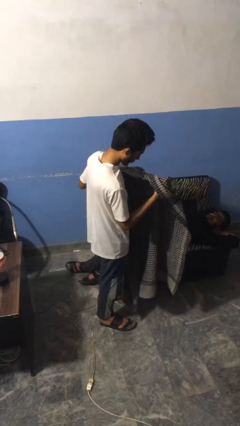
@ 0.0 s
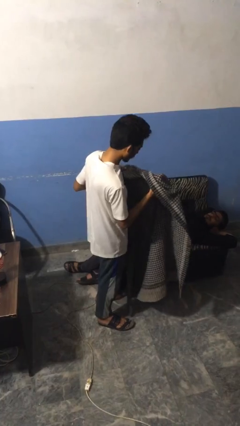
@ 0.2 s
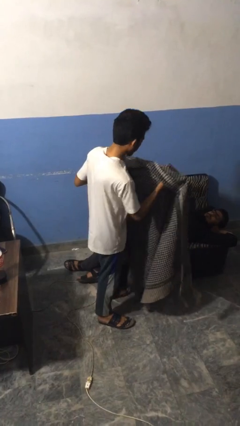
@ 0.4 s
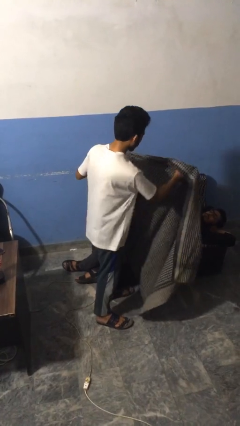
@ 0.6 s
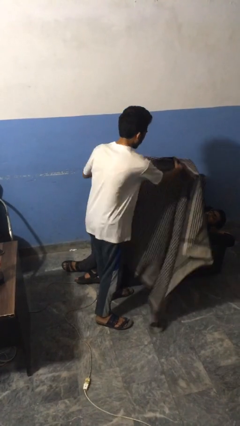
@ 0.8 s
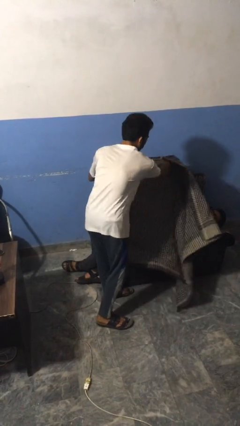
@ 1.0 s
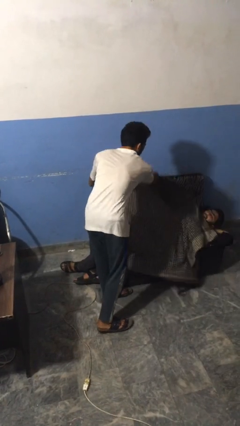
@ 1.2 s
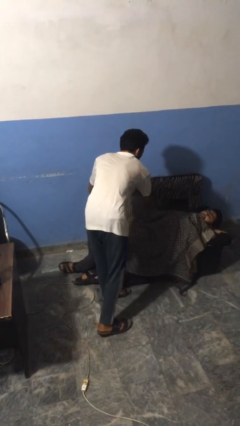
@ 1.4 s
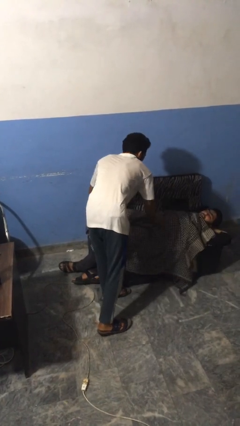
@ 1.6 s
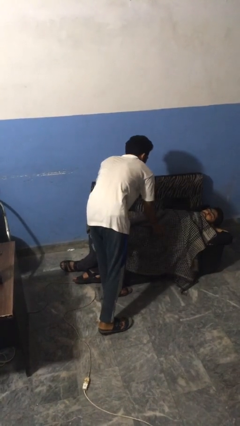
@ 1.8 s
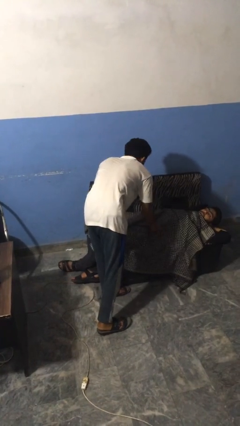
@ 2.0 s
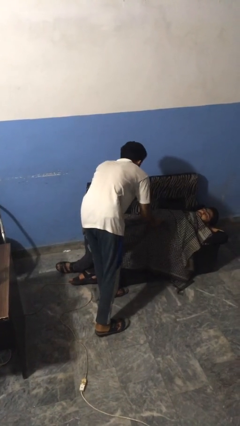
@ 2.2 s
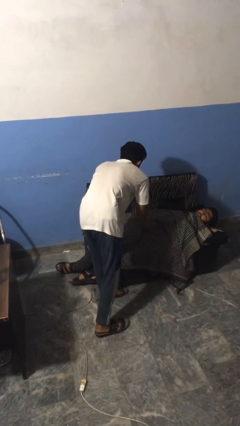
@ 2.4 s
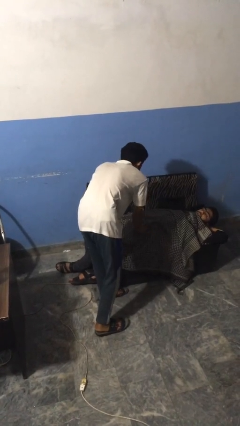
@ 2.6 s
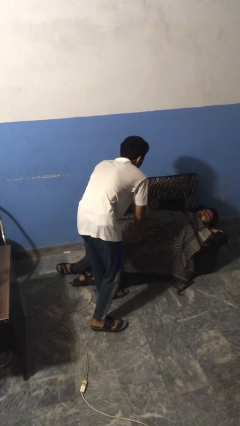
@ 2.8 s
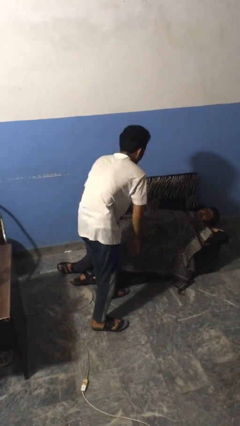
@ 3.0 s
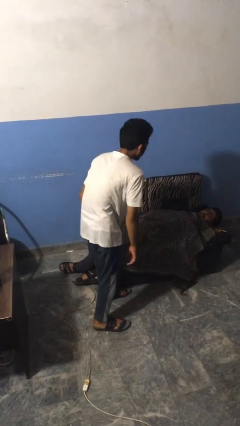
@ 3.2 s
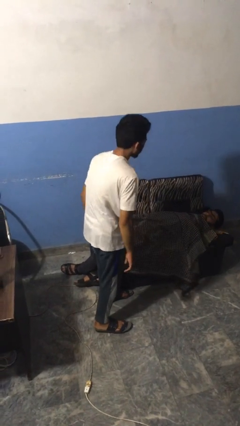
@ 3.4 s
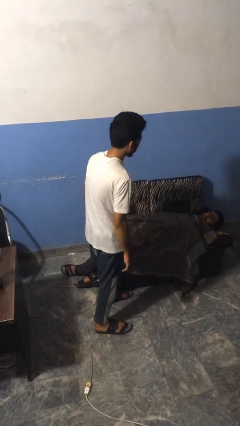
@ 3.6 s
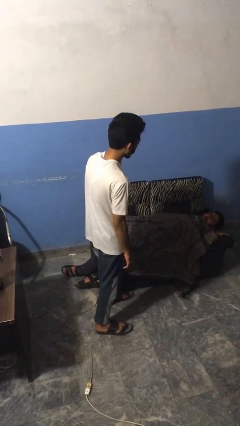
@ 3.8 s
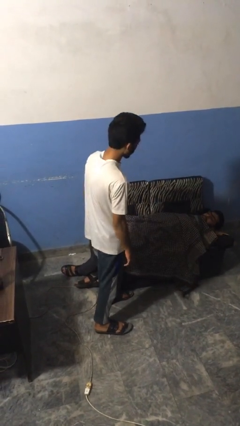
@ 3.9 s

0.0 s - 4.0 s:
person covers friend with blanket

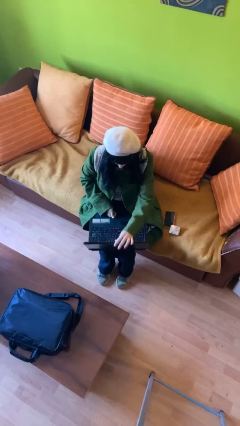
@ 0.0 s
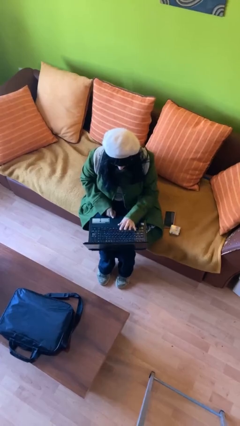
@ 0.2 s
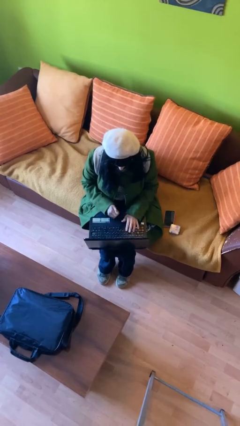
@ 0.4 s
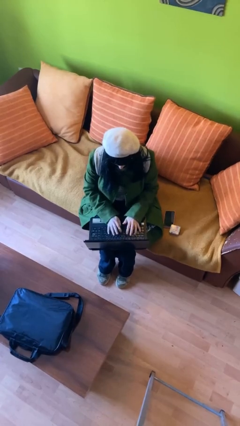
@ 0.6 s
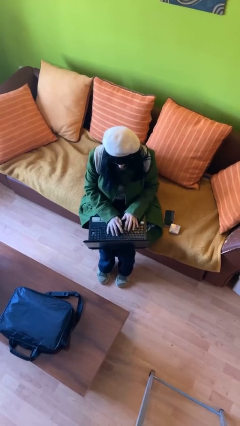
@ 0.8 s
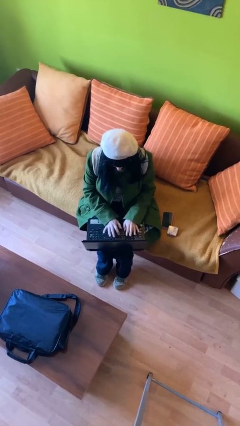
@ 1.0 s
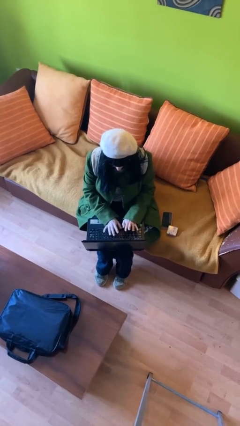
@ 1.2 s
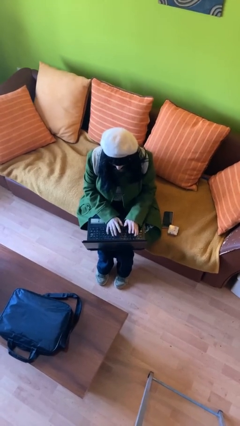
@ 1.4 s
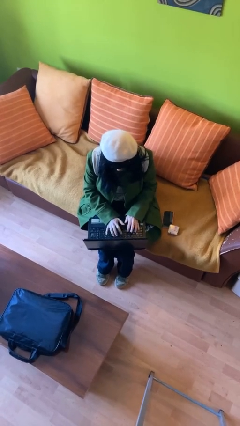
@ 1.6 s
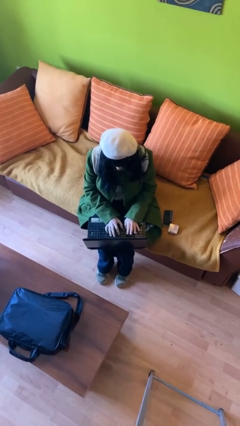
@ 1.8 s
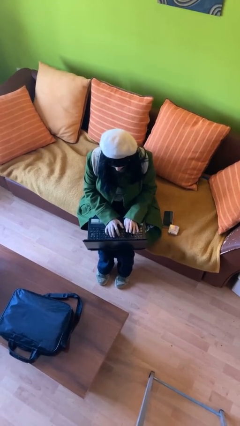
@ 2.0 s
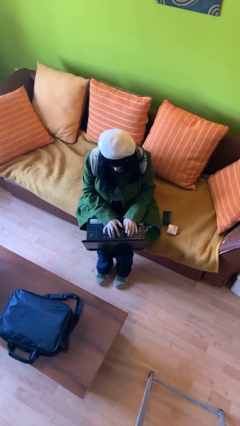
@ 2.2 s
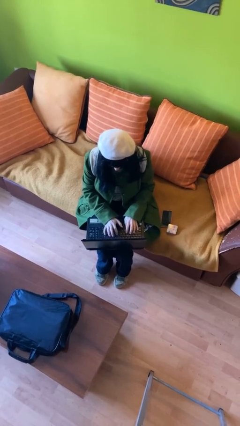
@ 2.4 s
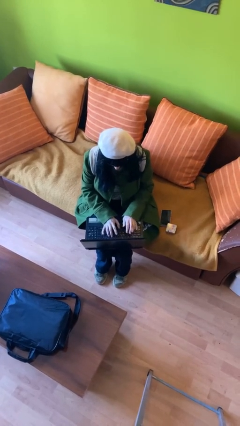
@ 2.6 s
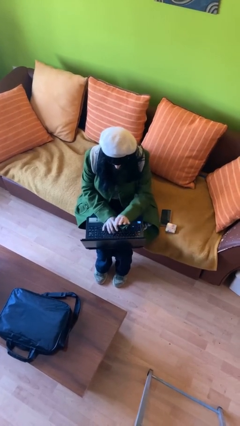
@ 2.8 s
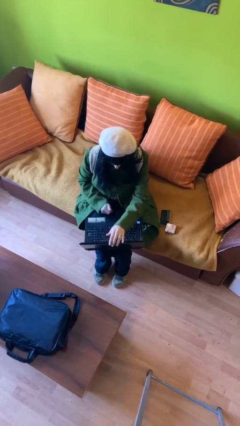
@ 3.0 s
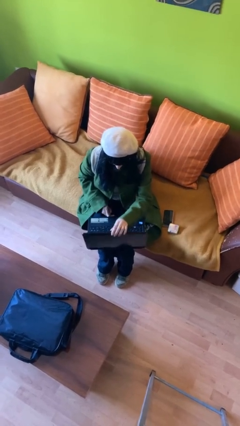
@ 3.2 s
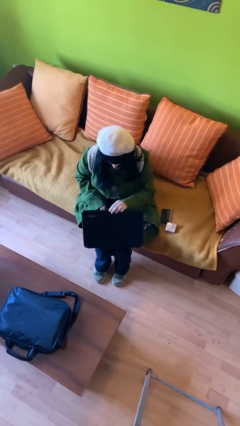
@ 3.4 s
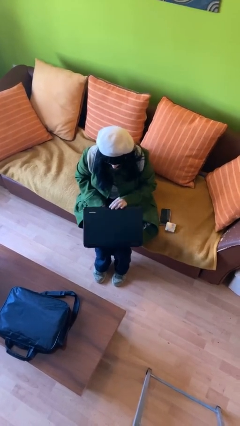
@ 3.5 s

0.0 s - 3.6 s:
person interacts with laptop

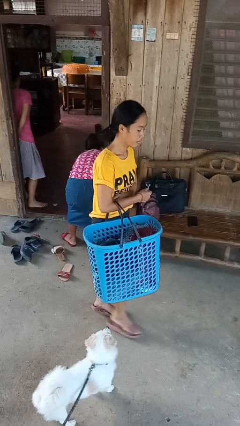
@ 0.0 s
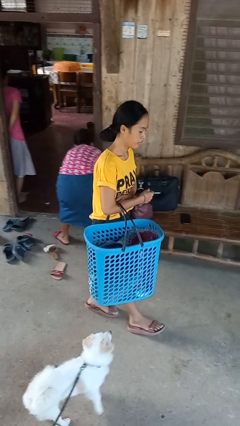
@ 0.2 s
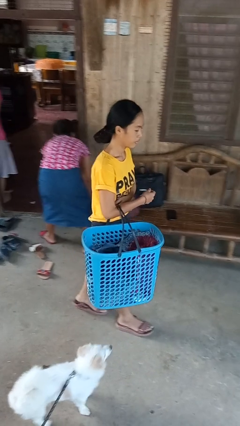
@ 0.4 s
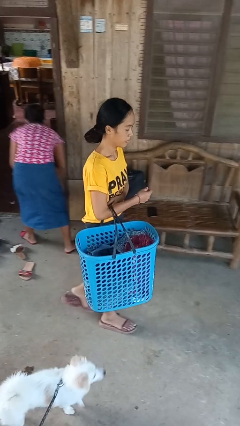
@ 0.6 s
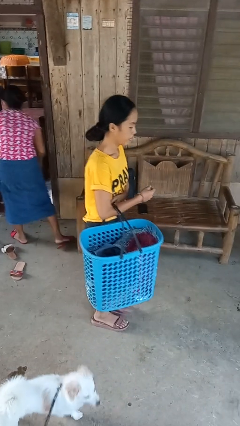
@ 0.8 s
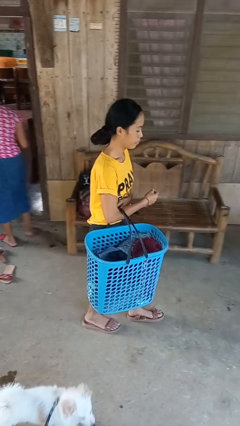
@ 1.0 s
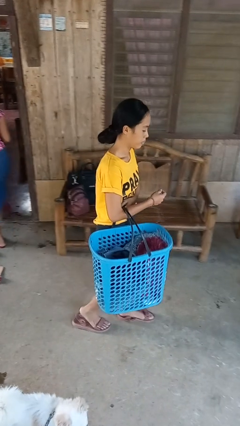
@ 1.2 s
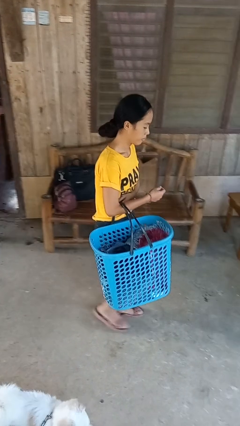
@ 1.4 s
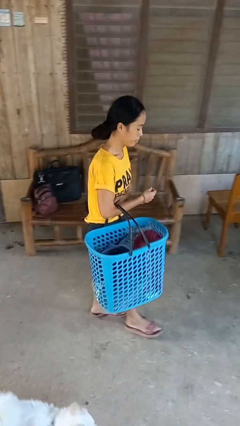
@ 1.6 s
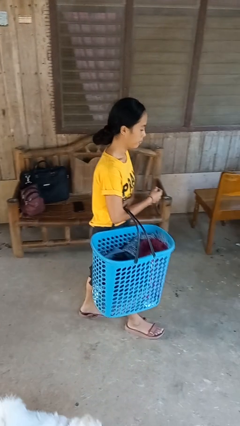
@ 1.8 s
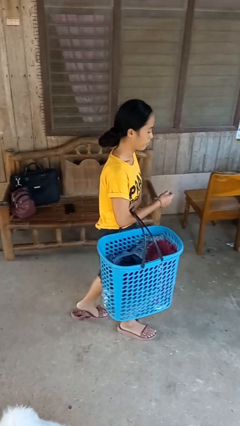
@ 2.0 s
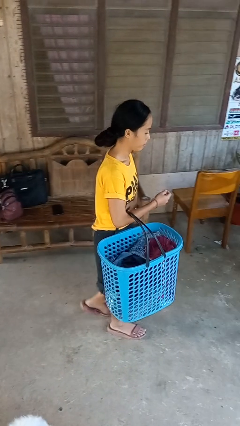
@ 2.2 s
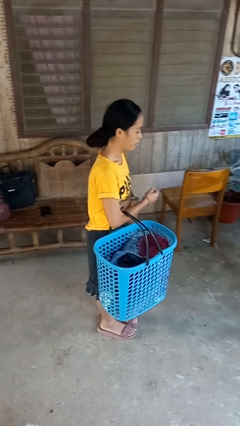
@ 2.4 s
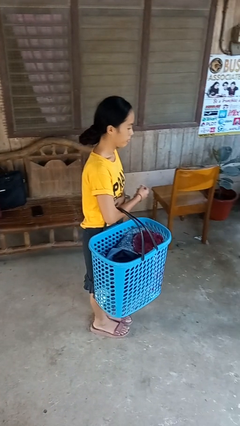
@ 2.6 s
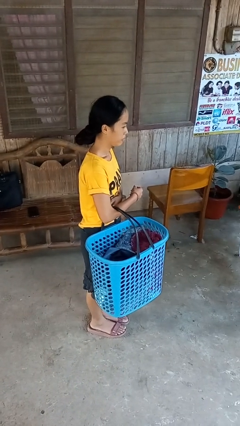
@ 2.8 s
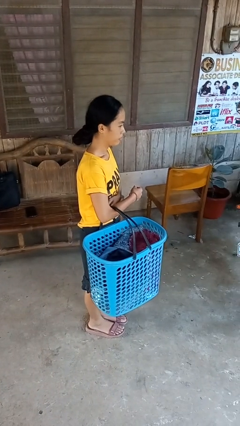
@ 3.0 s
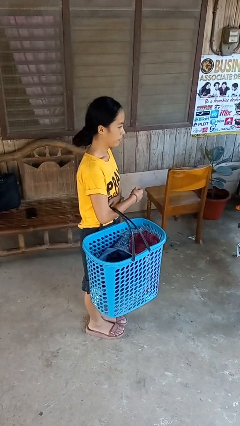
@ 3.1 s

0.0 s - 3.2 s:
person carries laundry basket

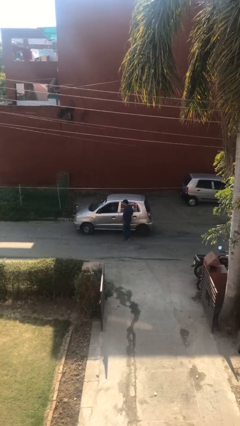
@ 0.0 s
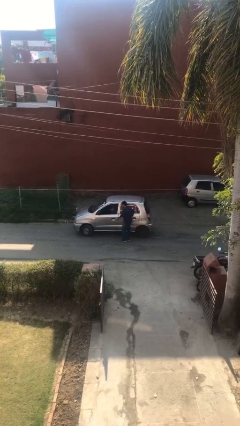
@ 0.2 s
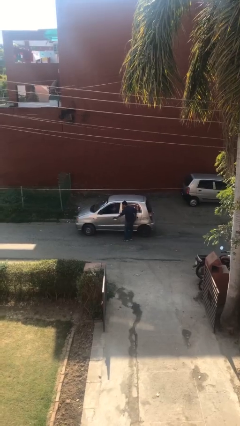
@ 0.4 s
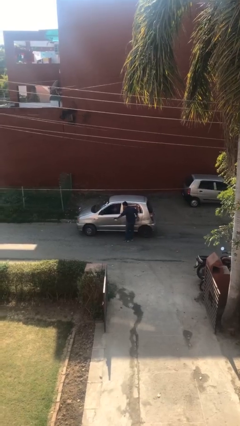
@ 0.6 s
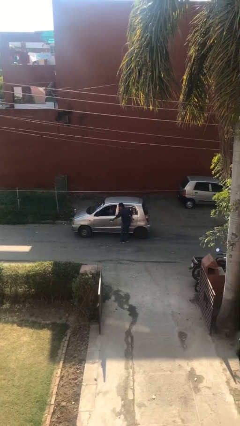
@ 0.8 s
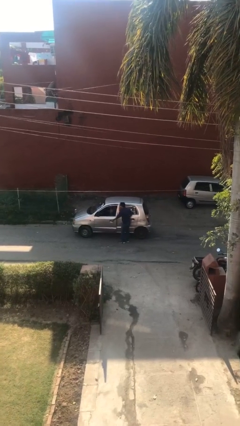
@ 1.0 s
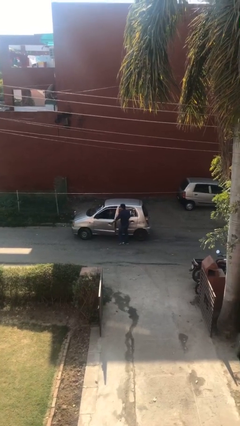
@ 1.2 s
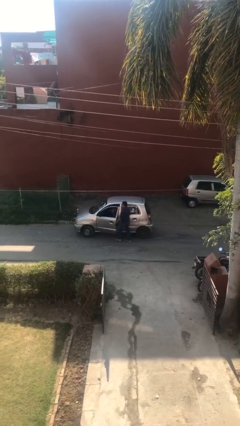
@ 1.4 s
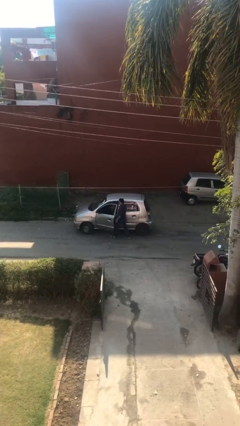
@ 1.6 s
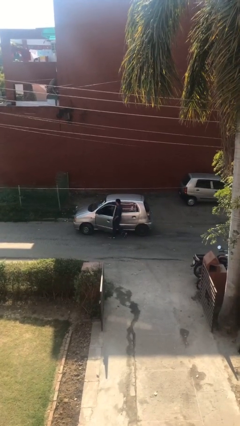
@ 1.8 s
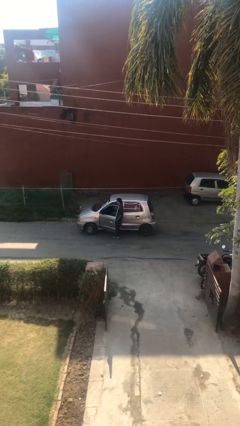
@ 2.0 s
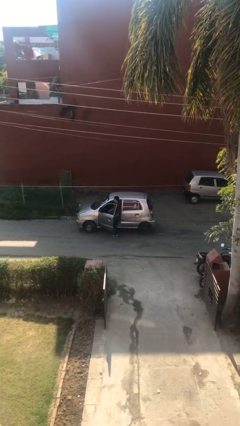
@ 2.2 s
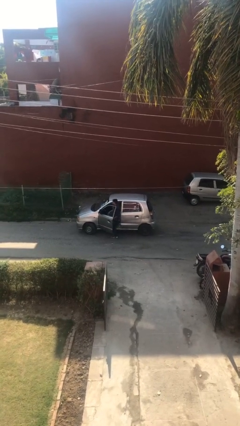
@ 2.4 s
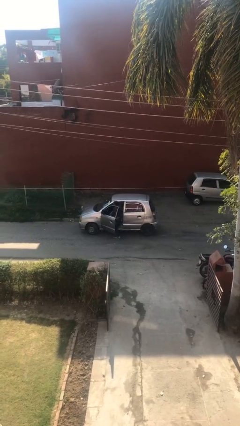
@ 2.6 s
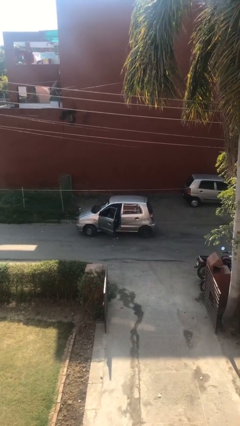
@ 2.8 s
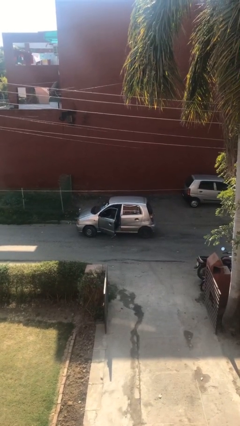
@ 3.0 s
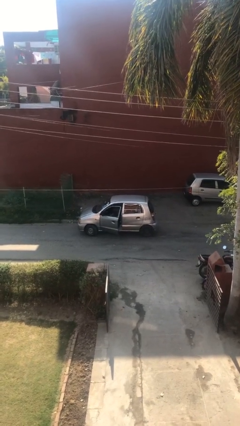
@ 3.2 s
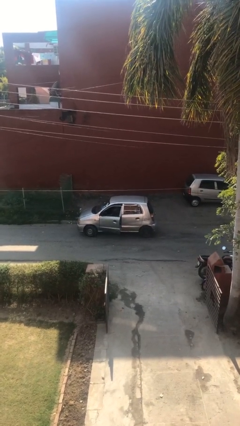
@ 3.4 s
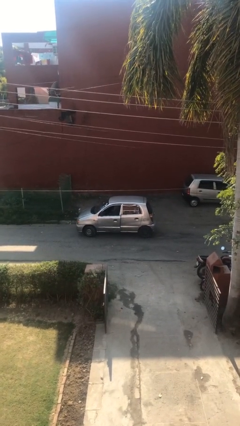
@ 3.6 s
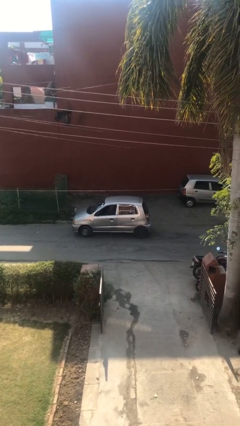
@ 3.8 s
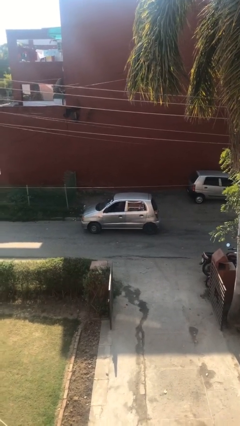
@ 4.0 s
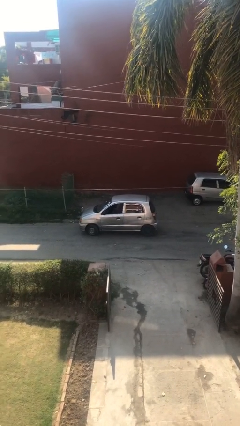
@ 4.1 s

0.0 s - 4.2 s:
car picks up person

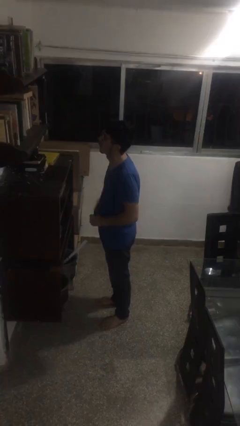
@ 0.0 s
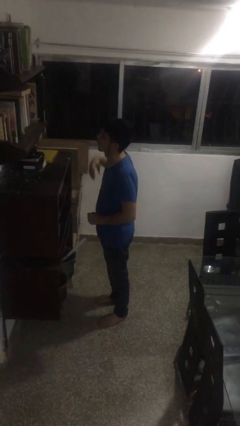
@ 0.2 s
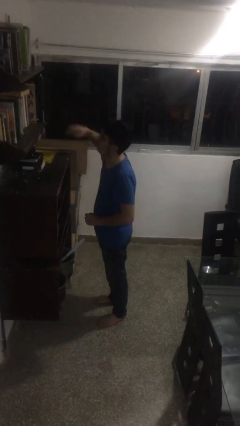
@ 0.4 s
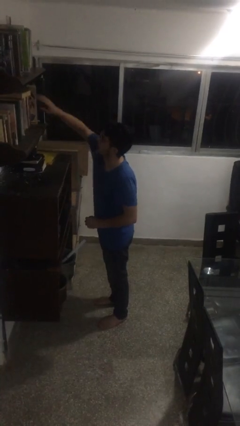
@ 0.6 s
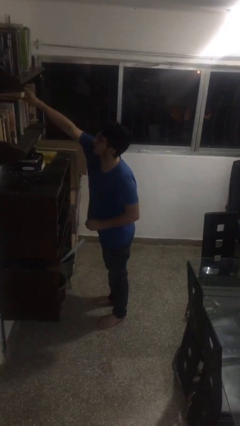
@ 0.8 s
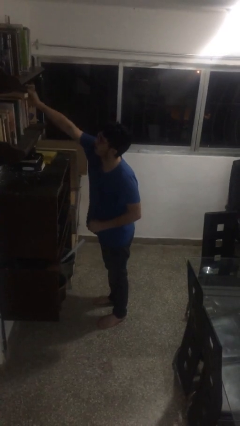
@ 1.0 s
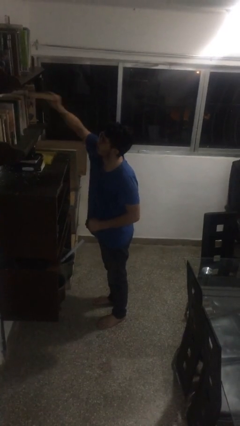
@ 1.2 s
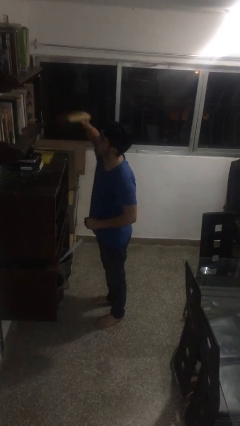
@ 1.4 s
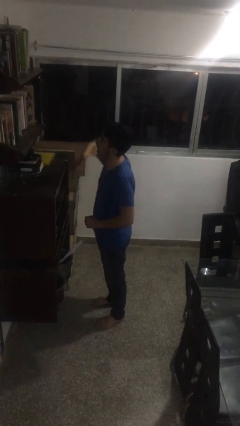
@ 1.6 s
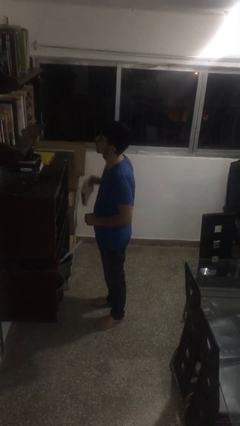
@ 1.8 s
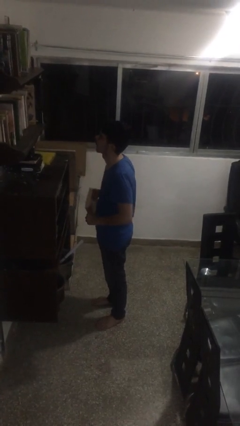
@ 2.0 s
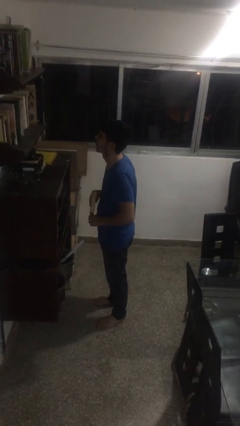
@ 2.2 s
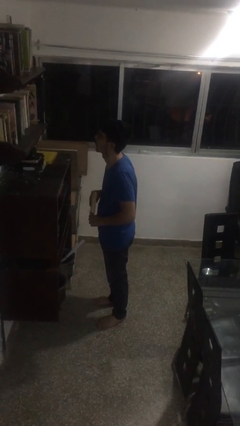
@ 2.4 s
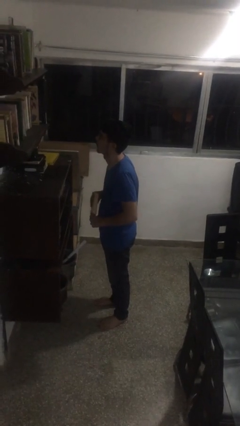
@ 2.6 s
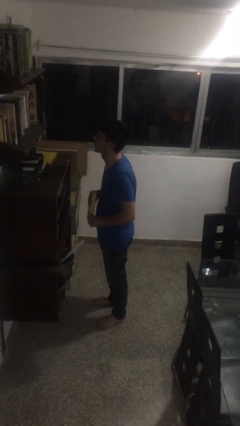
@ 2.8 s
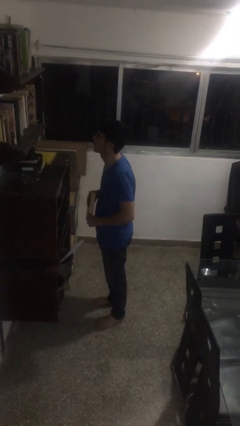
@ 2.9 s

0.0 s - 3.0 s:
person picks up object from shelf
